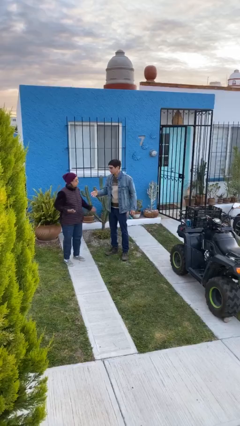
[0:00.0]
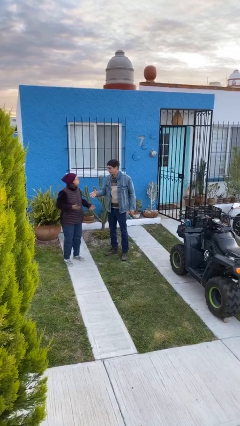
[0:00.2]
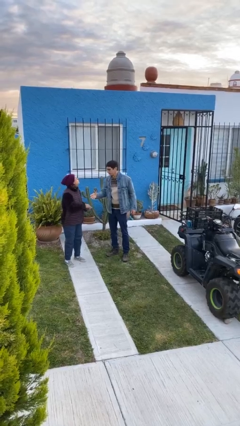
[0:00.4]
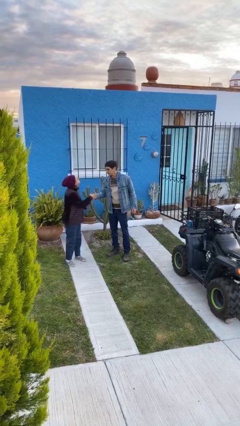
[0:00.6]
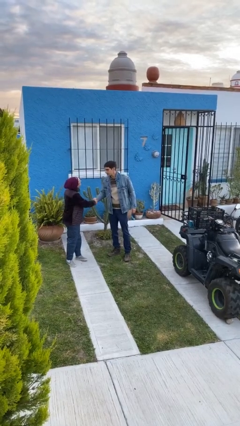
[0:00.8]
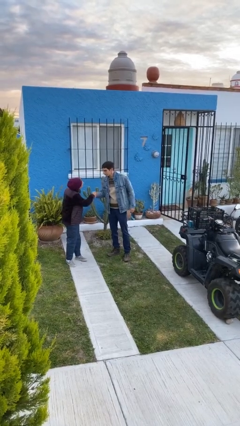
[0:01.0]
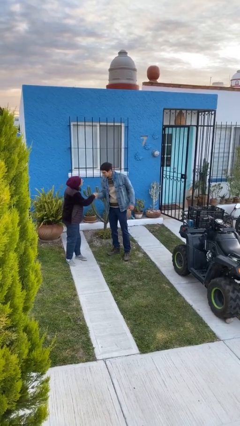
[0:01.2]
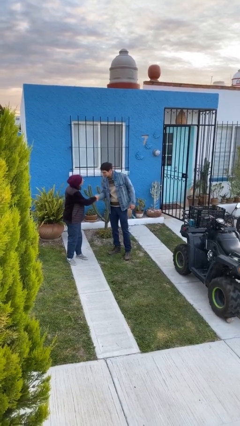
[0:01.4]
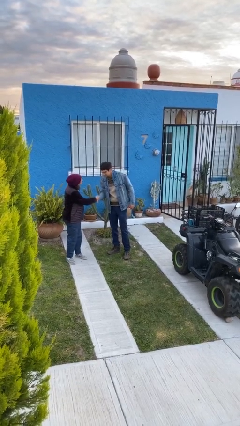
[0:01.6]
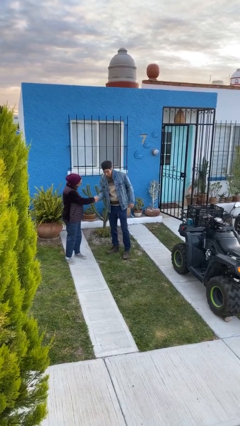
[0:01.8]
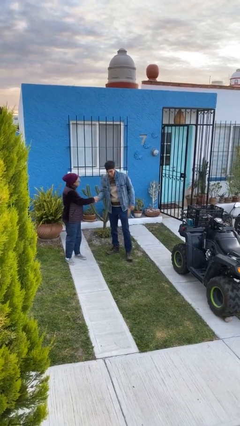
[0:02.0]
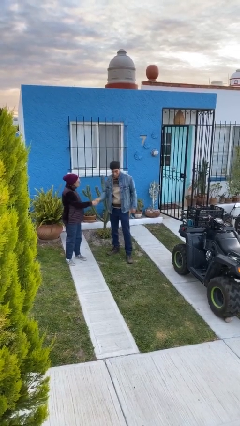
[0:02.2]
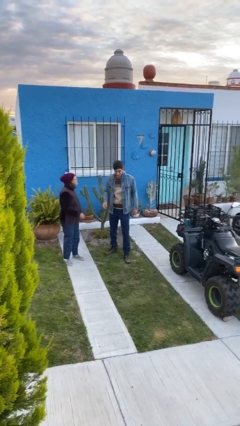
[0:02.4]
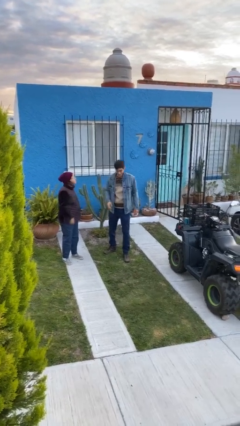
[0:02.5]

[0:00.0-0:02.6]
person shakes hand

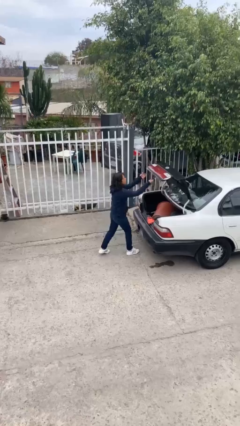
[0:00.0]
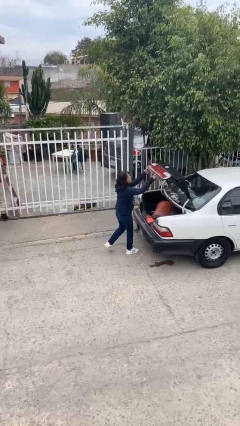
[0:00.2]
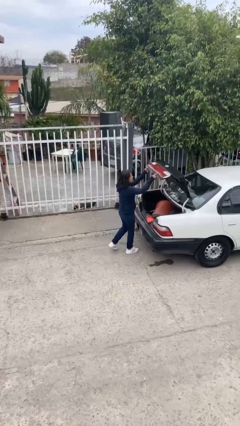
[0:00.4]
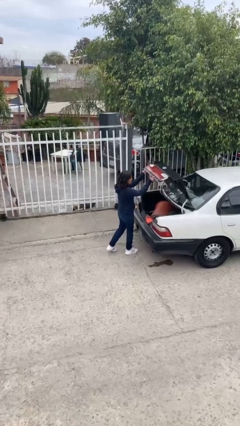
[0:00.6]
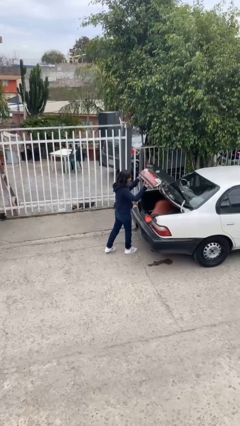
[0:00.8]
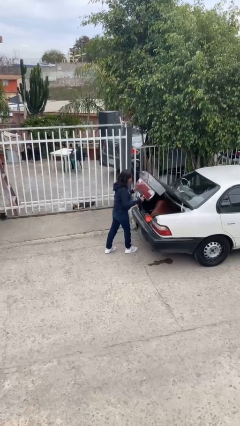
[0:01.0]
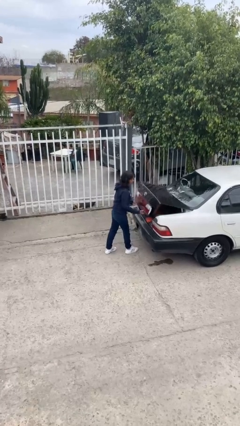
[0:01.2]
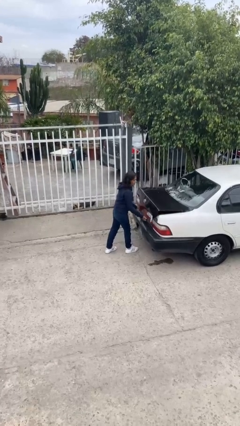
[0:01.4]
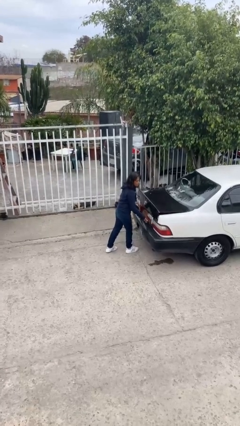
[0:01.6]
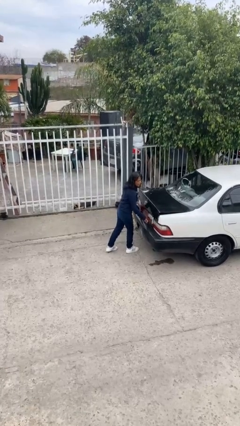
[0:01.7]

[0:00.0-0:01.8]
person closes car trunk

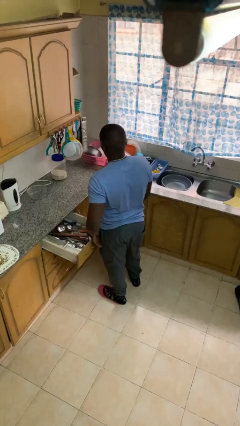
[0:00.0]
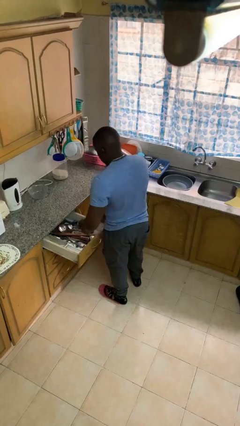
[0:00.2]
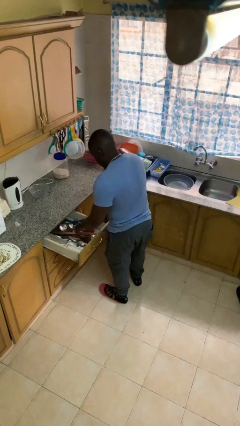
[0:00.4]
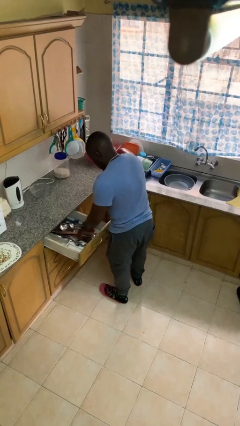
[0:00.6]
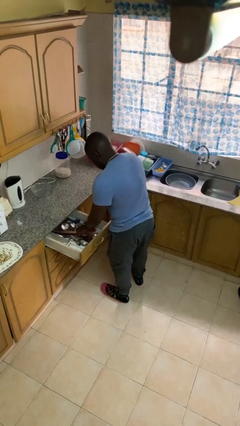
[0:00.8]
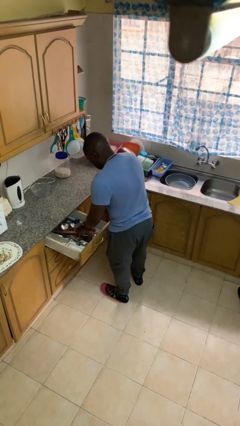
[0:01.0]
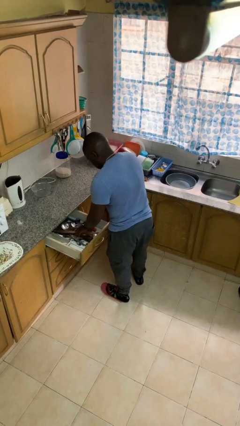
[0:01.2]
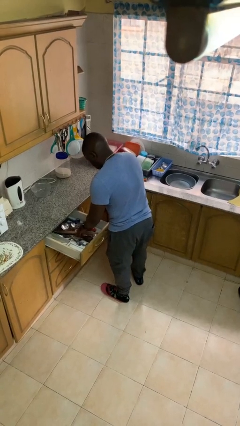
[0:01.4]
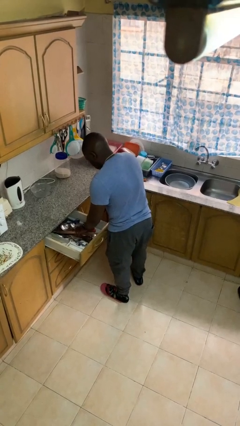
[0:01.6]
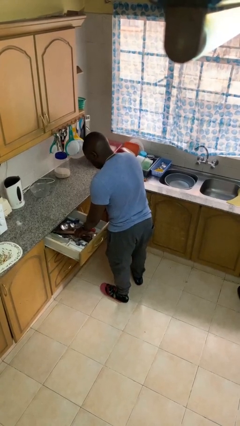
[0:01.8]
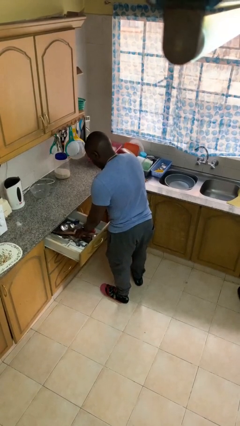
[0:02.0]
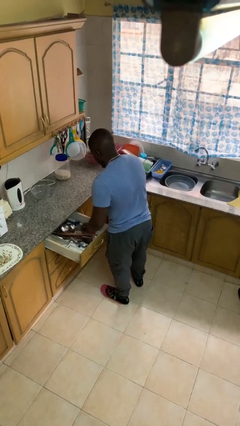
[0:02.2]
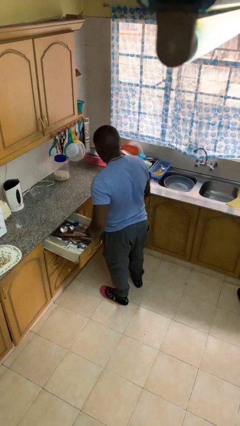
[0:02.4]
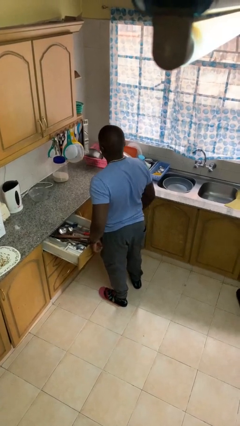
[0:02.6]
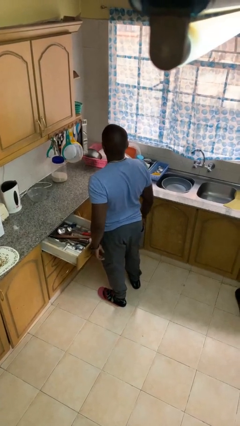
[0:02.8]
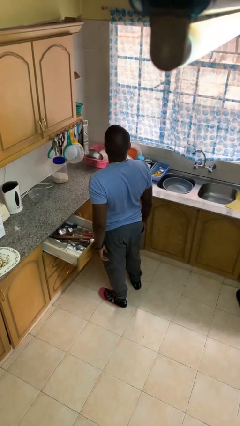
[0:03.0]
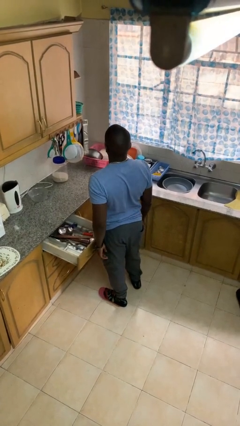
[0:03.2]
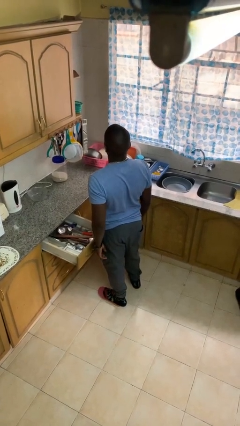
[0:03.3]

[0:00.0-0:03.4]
person searches in kitchen drawer

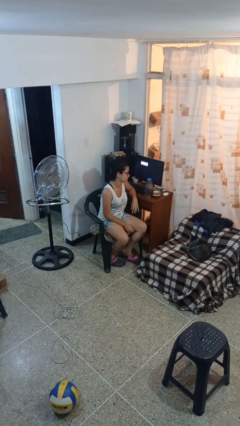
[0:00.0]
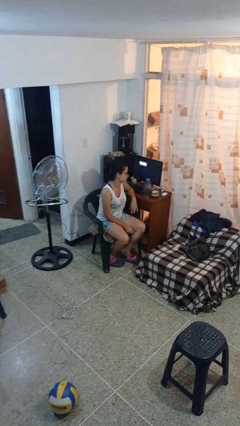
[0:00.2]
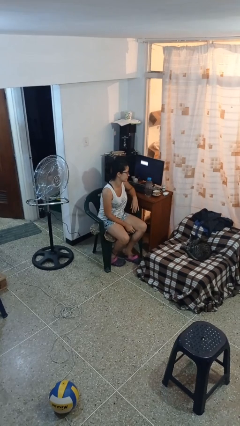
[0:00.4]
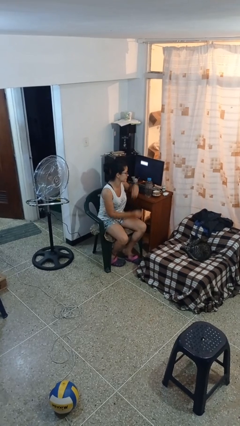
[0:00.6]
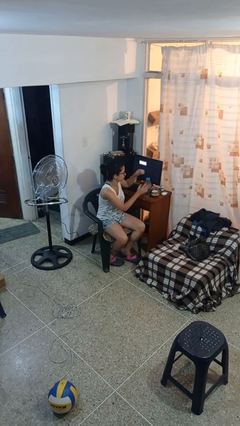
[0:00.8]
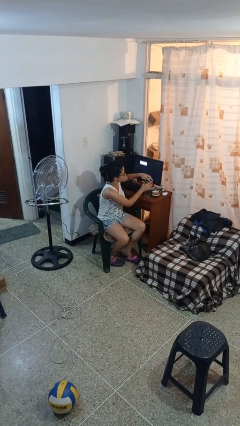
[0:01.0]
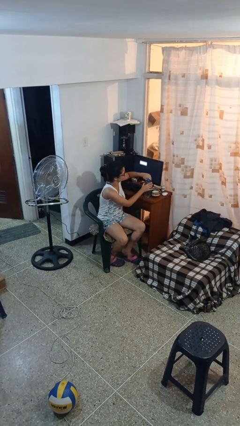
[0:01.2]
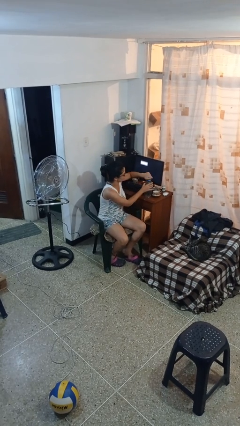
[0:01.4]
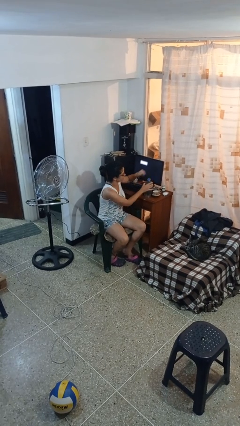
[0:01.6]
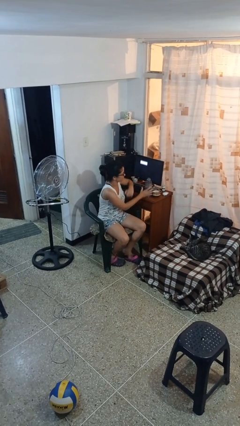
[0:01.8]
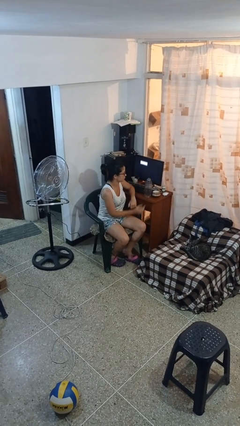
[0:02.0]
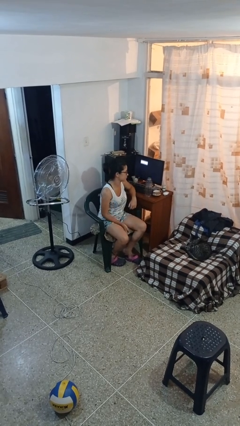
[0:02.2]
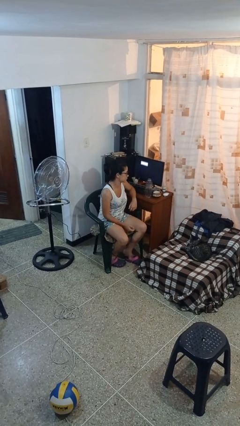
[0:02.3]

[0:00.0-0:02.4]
person unscrews lid from bottle

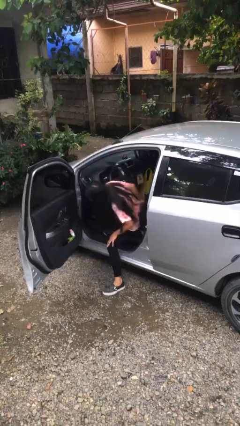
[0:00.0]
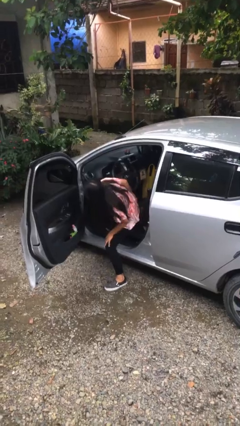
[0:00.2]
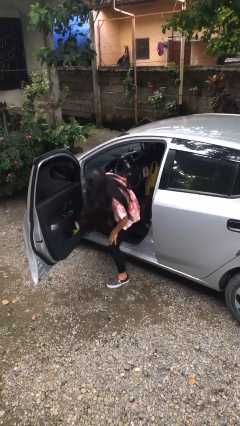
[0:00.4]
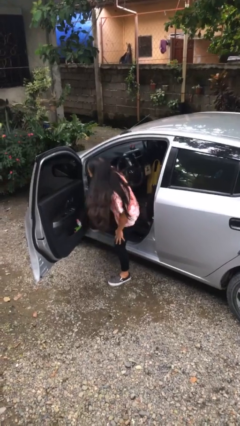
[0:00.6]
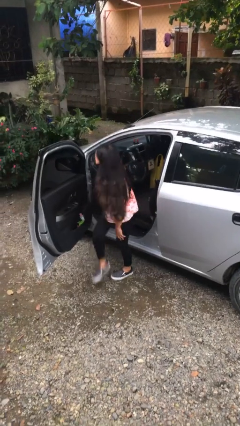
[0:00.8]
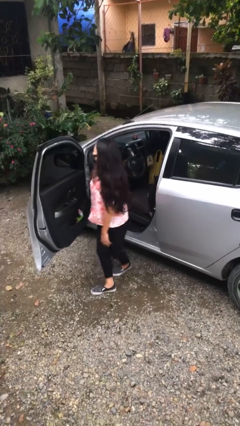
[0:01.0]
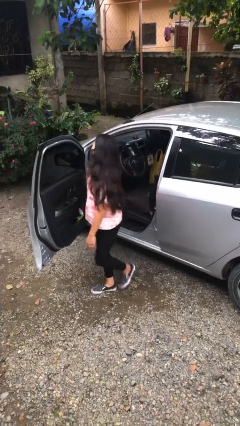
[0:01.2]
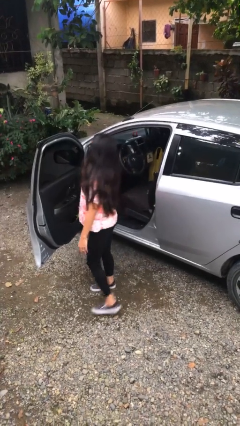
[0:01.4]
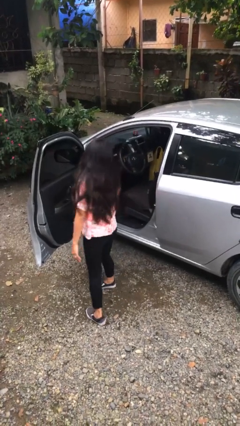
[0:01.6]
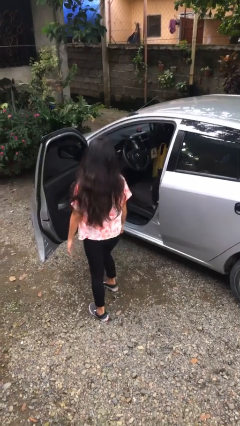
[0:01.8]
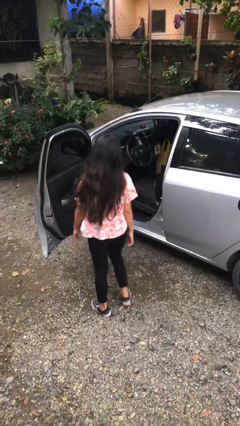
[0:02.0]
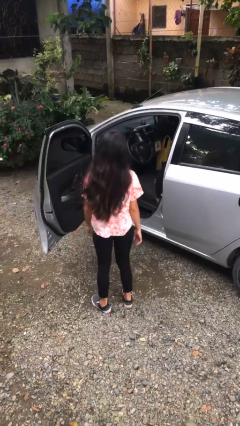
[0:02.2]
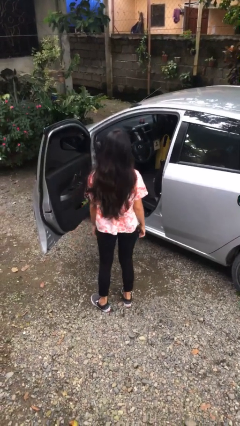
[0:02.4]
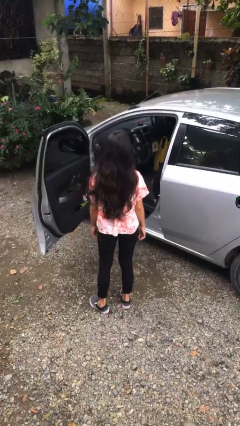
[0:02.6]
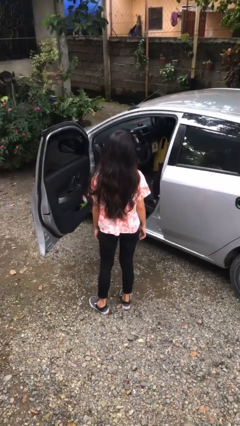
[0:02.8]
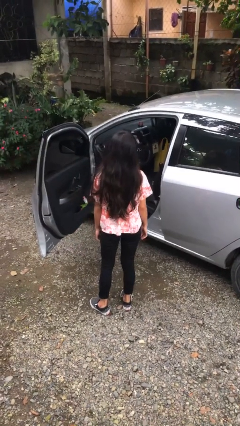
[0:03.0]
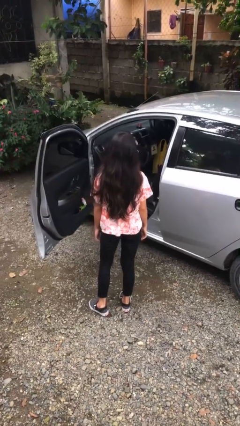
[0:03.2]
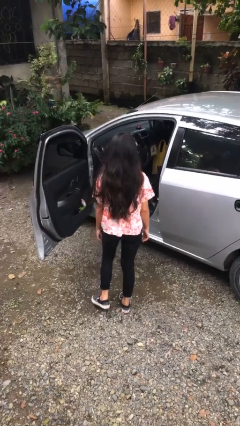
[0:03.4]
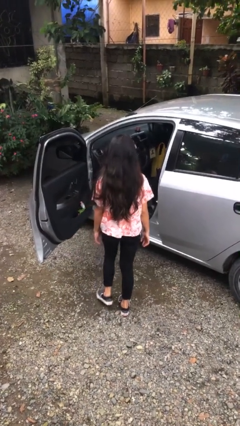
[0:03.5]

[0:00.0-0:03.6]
person exits car

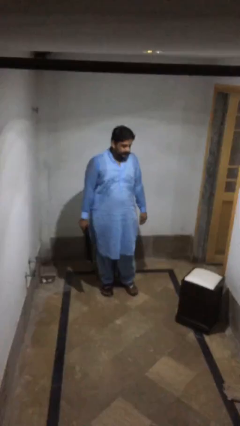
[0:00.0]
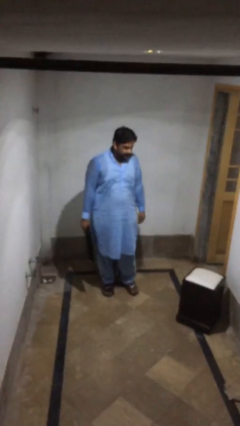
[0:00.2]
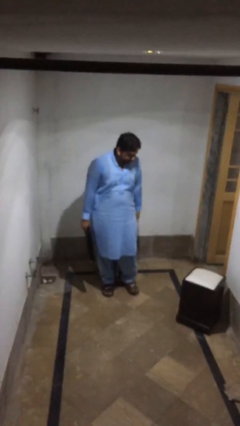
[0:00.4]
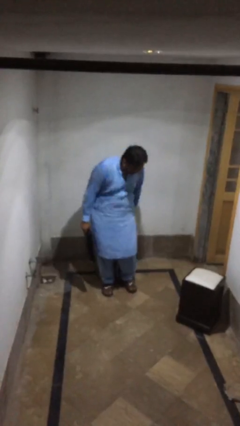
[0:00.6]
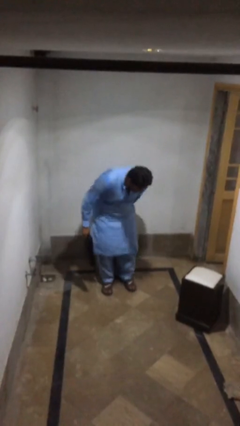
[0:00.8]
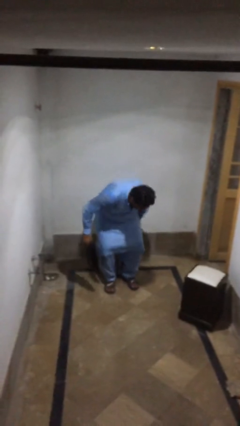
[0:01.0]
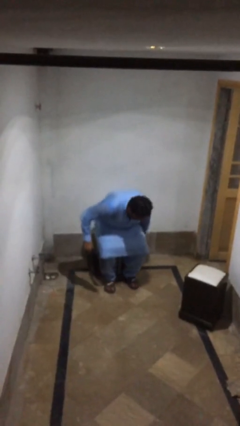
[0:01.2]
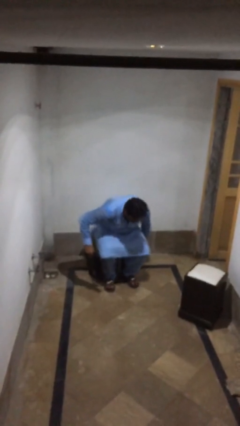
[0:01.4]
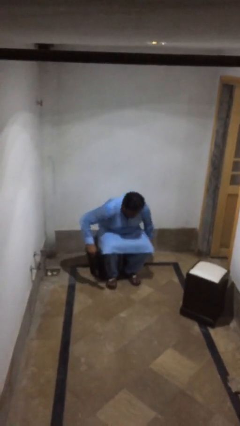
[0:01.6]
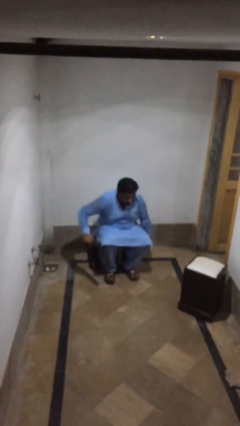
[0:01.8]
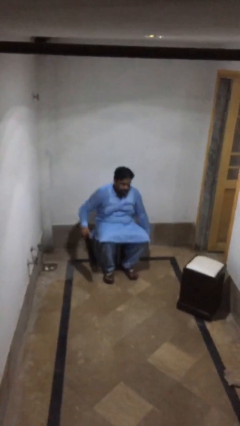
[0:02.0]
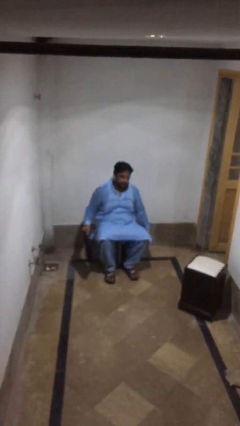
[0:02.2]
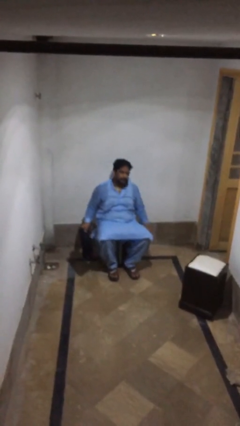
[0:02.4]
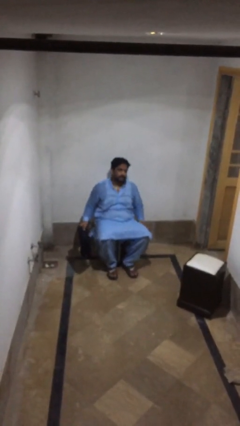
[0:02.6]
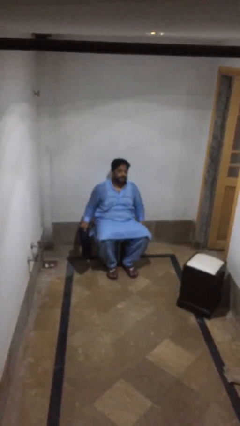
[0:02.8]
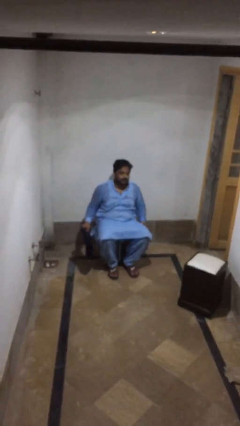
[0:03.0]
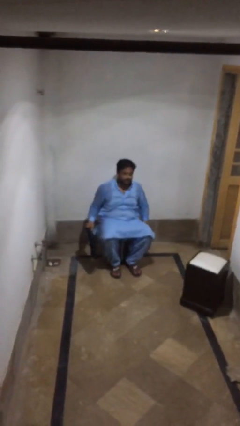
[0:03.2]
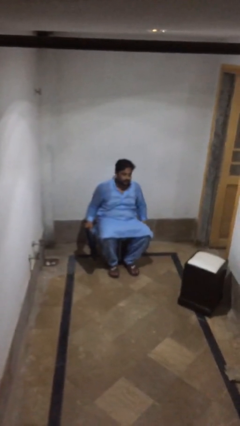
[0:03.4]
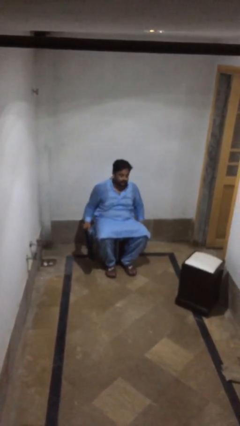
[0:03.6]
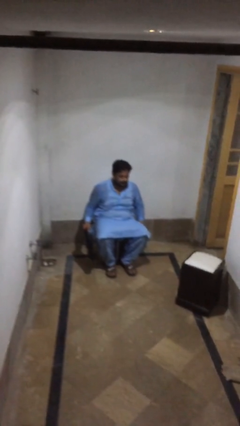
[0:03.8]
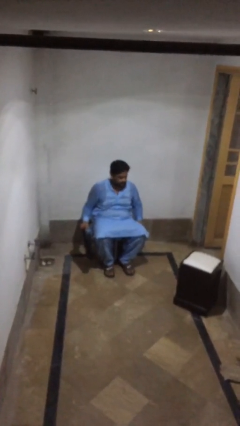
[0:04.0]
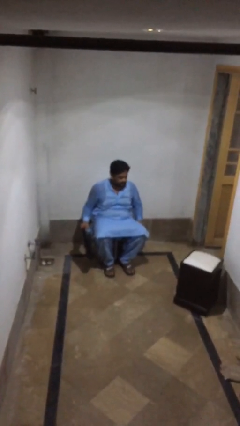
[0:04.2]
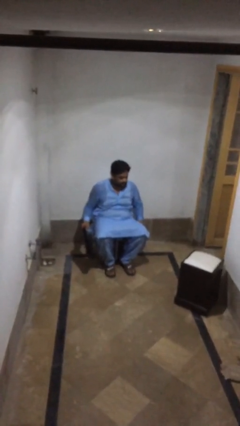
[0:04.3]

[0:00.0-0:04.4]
person sits down
